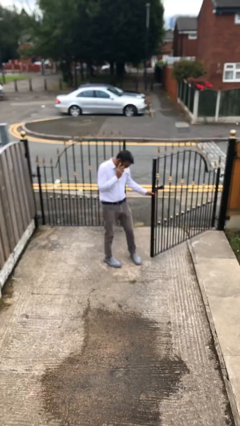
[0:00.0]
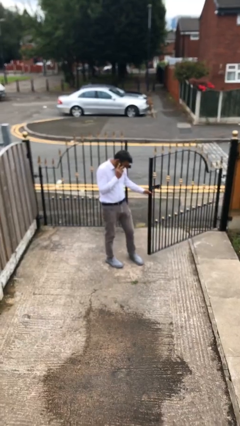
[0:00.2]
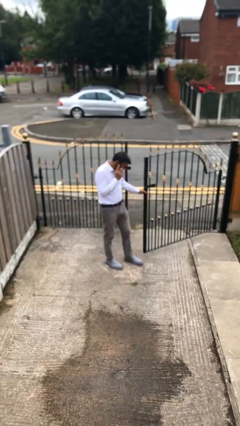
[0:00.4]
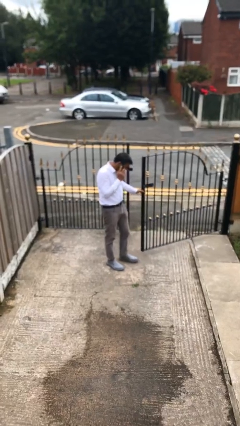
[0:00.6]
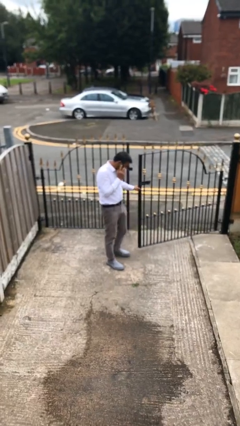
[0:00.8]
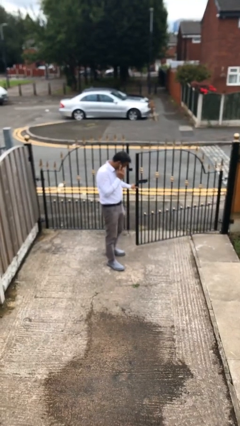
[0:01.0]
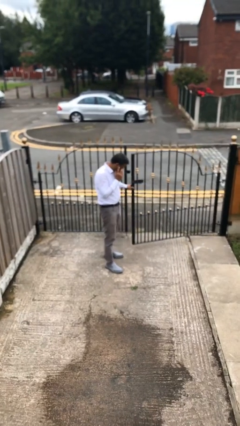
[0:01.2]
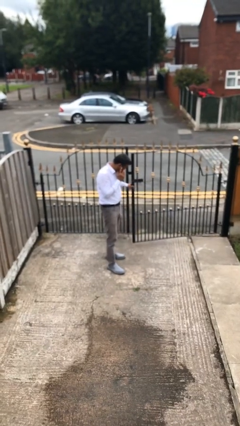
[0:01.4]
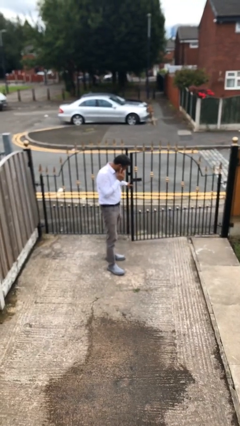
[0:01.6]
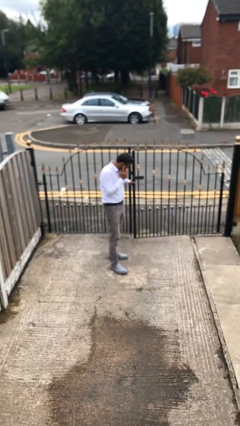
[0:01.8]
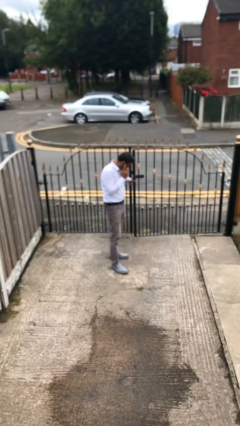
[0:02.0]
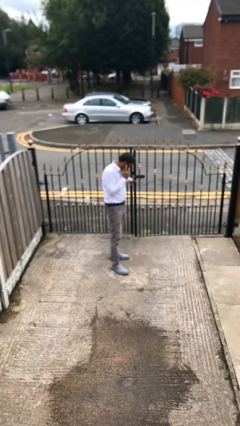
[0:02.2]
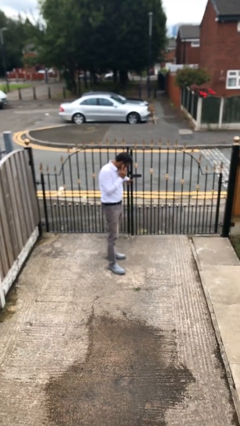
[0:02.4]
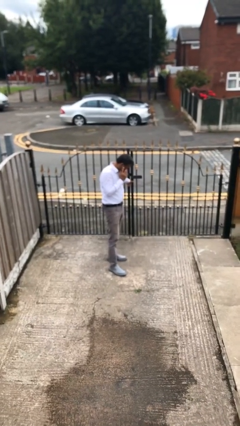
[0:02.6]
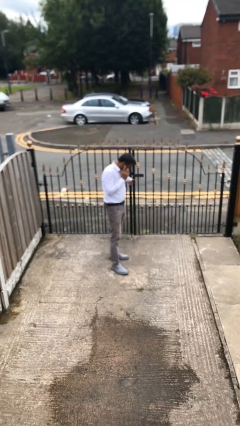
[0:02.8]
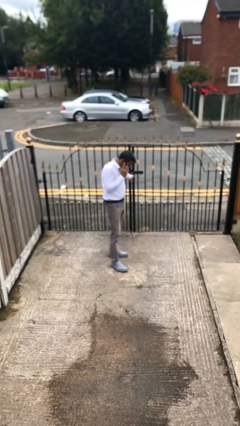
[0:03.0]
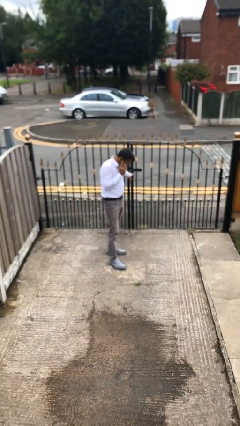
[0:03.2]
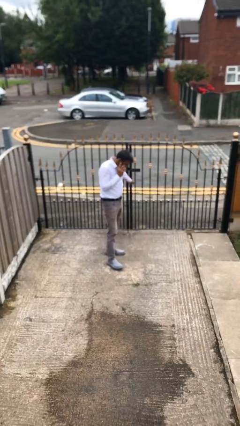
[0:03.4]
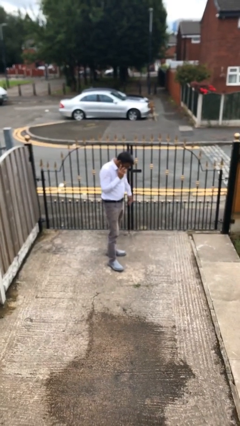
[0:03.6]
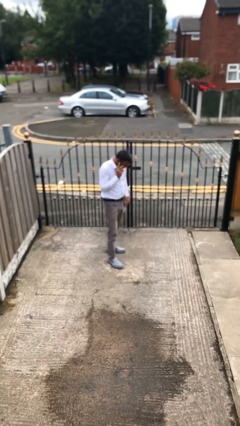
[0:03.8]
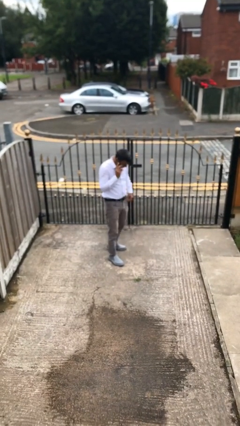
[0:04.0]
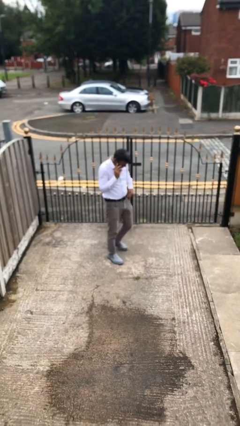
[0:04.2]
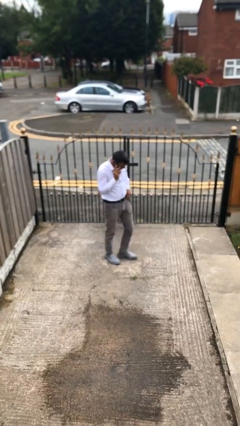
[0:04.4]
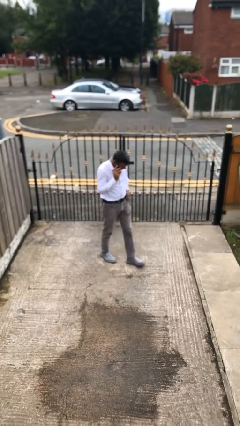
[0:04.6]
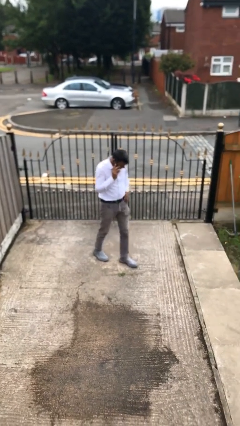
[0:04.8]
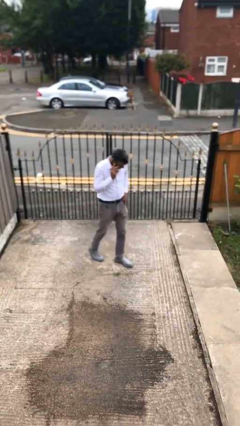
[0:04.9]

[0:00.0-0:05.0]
person closes facility door

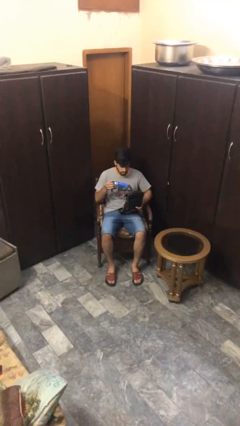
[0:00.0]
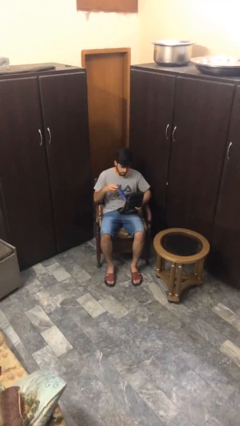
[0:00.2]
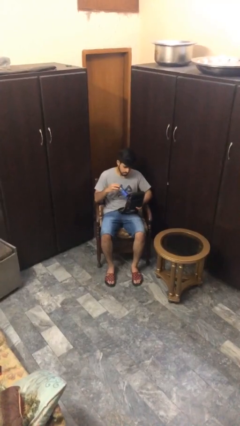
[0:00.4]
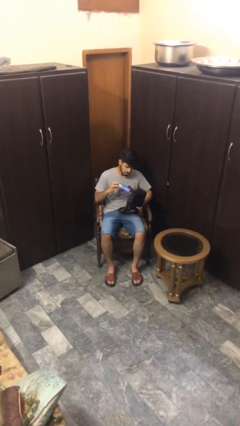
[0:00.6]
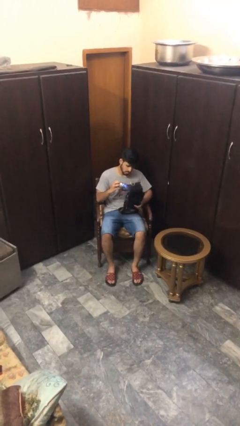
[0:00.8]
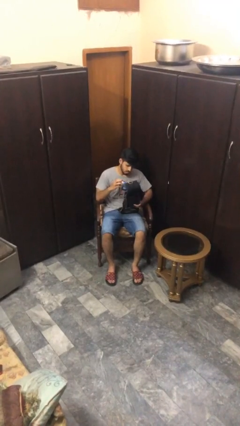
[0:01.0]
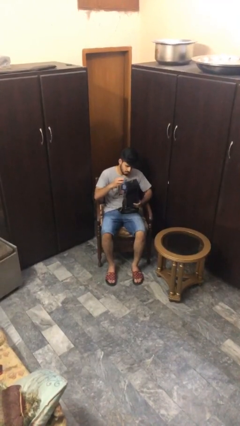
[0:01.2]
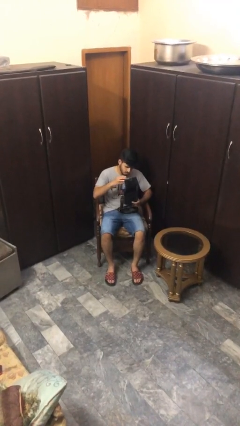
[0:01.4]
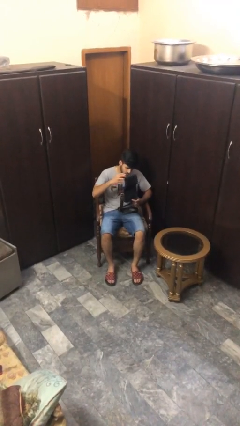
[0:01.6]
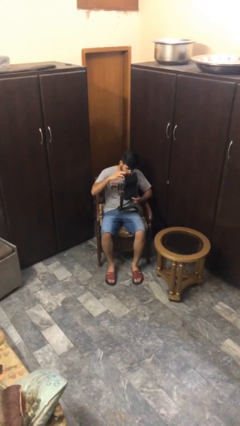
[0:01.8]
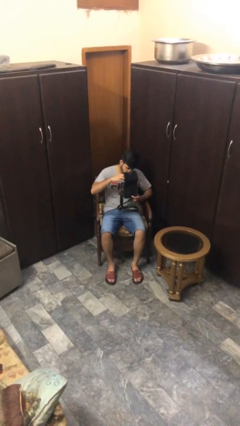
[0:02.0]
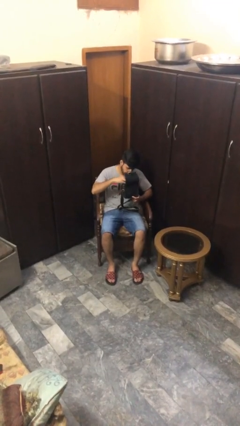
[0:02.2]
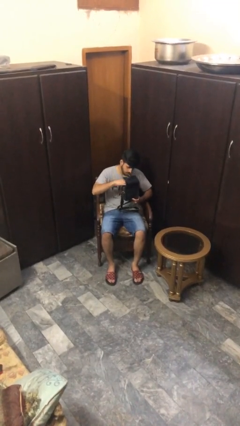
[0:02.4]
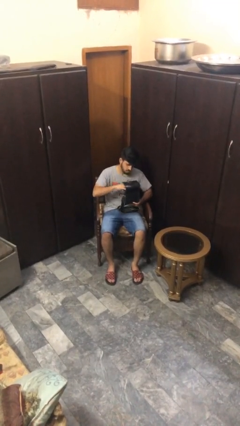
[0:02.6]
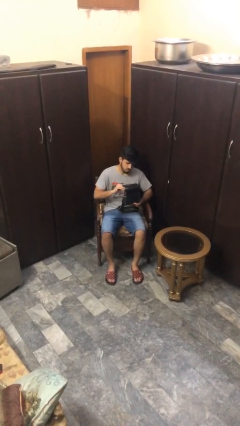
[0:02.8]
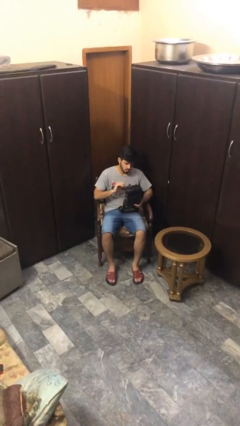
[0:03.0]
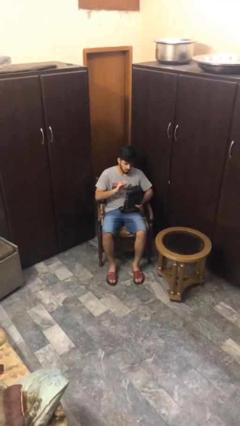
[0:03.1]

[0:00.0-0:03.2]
person puts object into purse

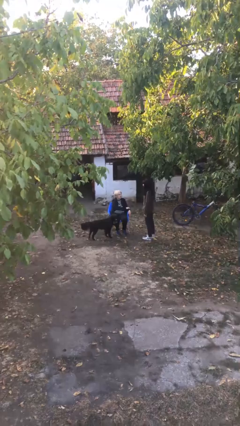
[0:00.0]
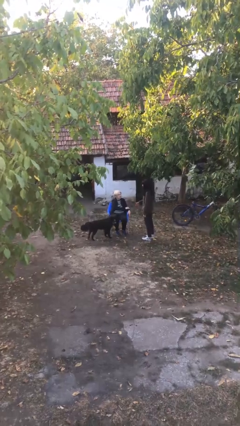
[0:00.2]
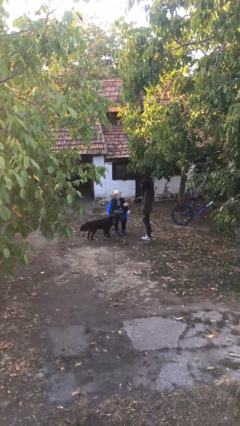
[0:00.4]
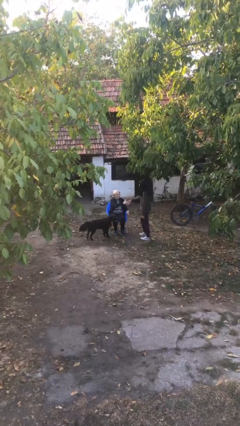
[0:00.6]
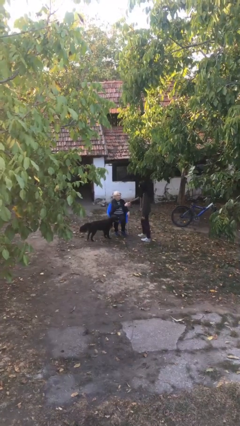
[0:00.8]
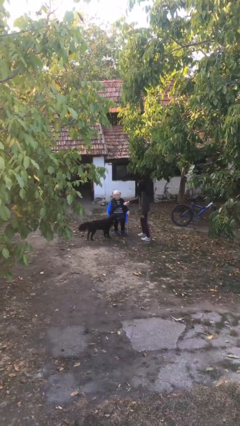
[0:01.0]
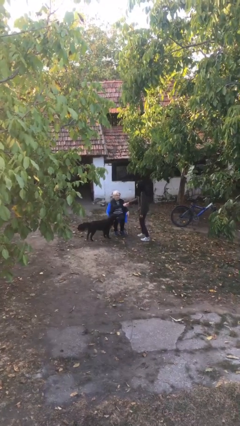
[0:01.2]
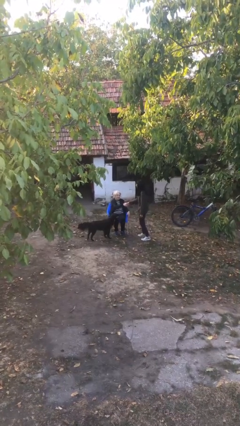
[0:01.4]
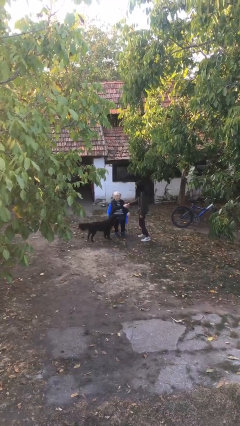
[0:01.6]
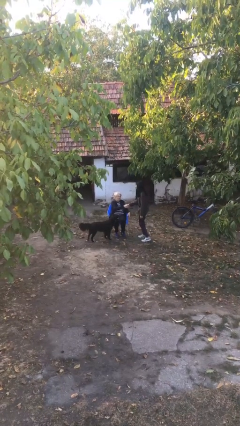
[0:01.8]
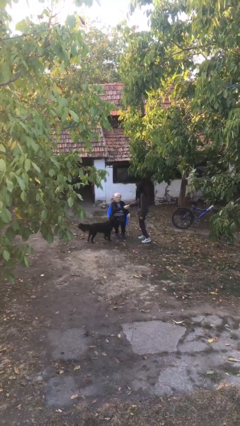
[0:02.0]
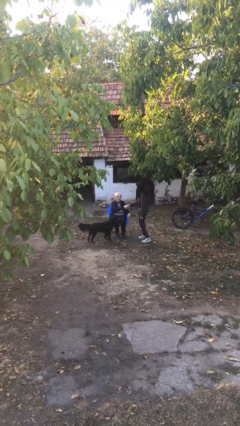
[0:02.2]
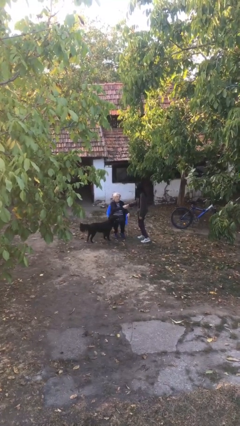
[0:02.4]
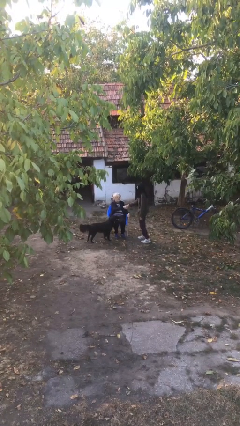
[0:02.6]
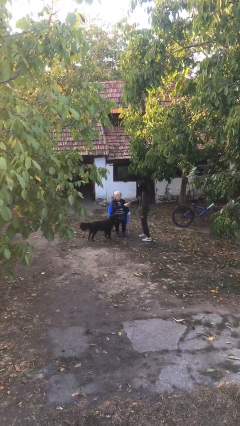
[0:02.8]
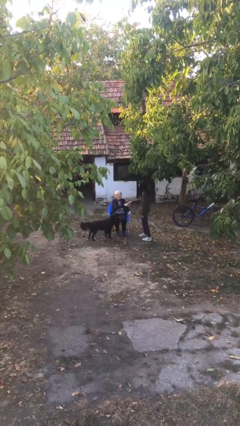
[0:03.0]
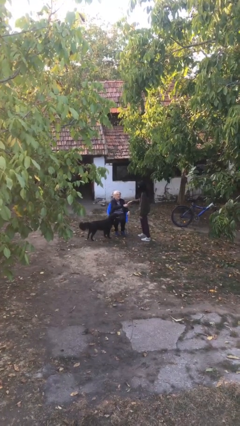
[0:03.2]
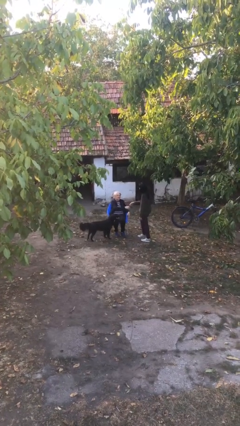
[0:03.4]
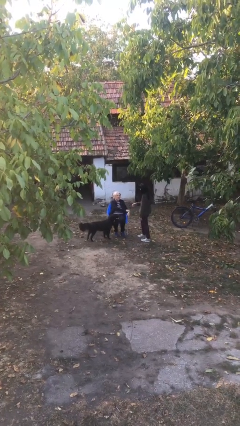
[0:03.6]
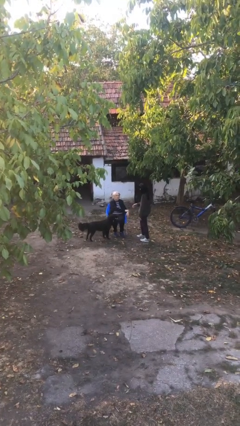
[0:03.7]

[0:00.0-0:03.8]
person shakes hand

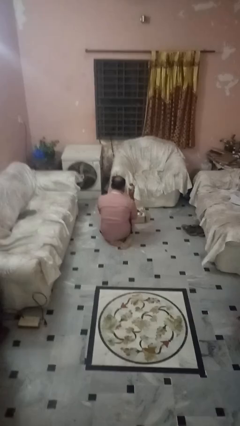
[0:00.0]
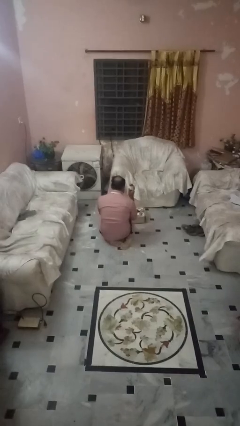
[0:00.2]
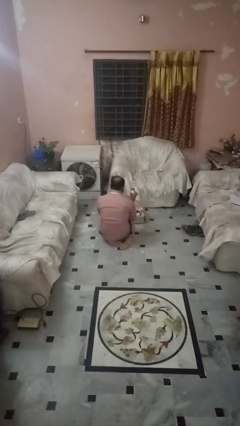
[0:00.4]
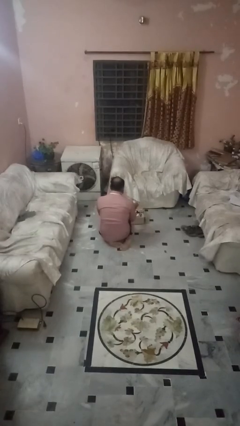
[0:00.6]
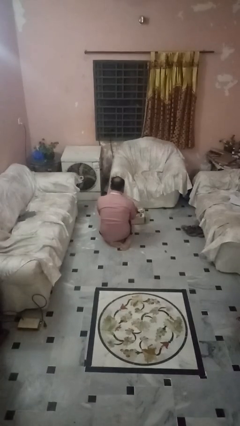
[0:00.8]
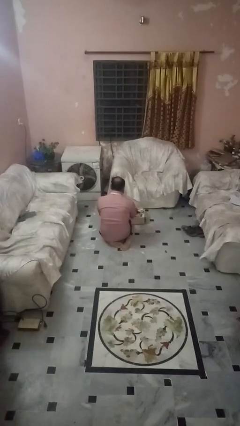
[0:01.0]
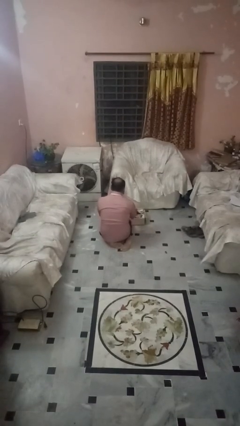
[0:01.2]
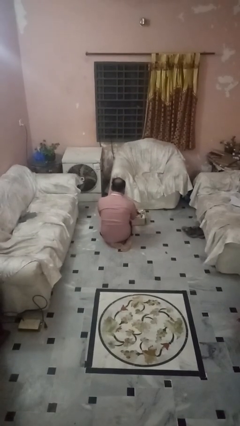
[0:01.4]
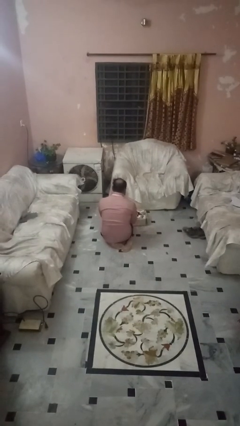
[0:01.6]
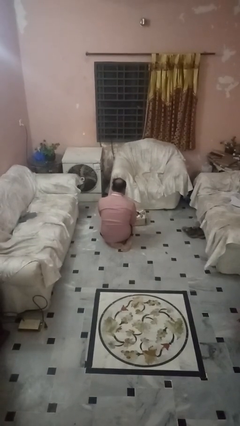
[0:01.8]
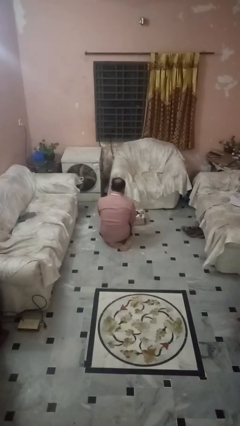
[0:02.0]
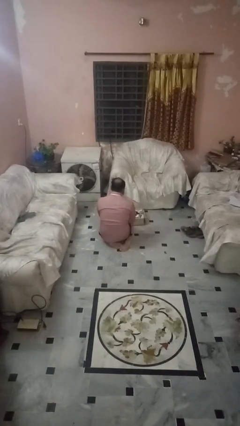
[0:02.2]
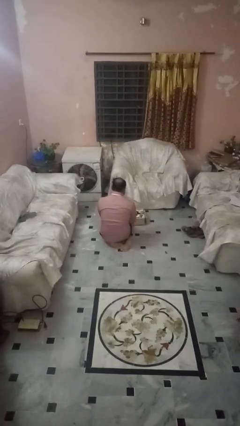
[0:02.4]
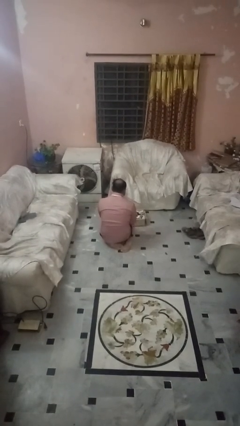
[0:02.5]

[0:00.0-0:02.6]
person puts object into box

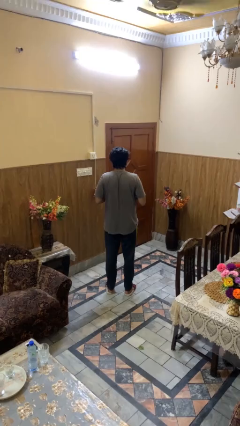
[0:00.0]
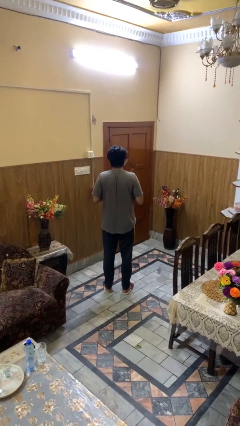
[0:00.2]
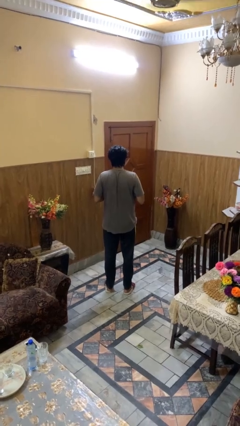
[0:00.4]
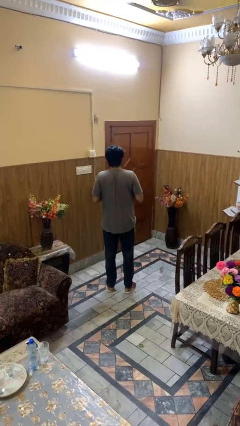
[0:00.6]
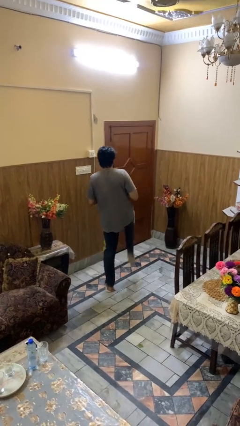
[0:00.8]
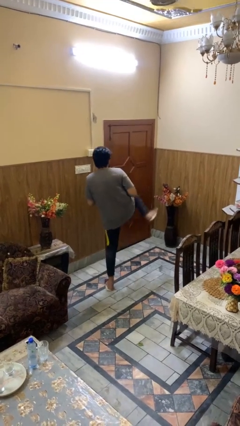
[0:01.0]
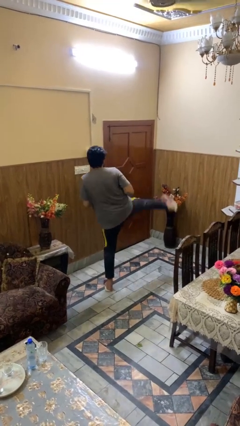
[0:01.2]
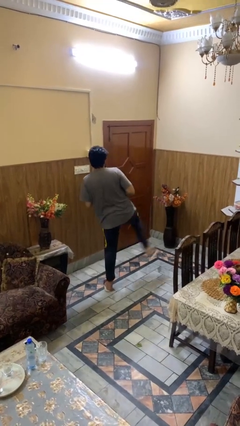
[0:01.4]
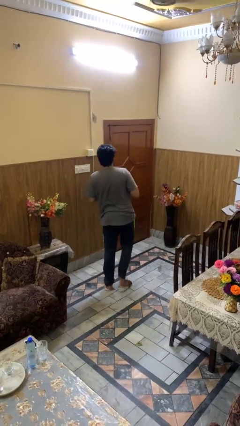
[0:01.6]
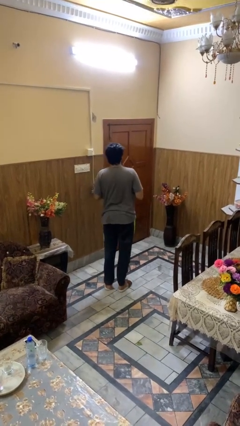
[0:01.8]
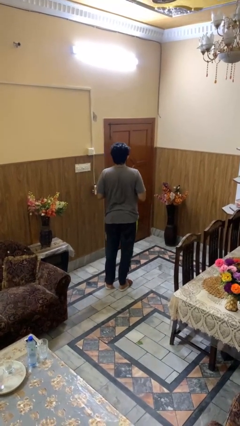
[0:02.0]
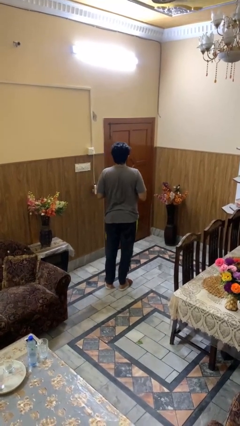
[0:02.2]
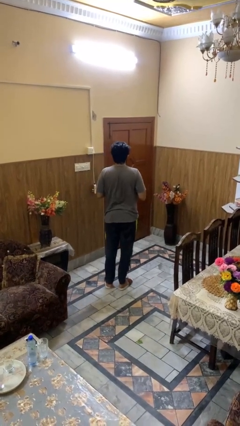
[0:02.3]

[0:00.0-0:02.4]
person karate kicks

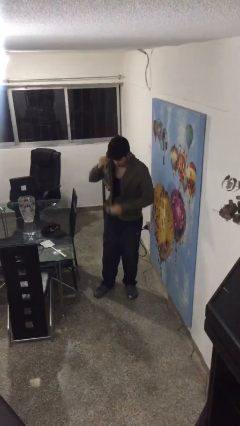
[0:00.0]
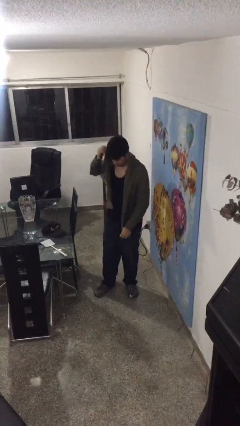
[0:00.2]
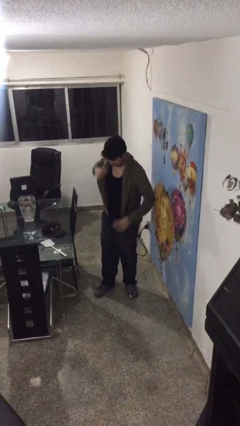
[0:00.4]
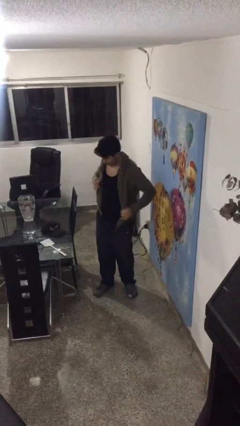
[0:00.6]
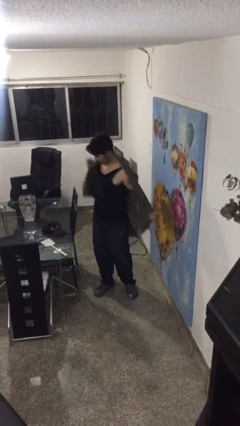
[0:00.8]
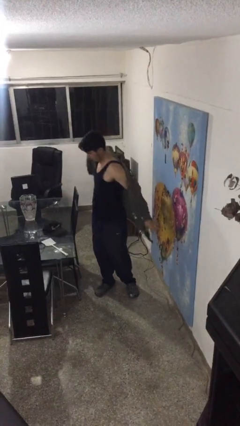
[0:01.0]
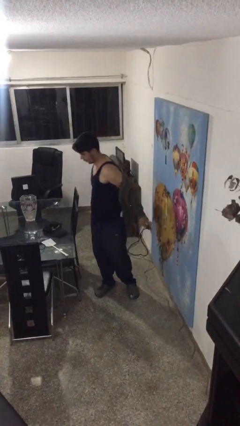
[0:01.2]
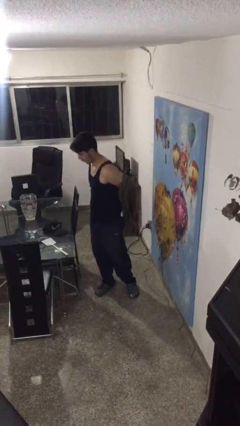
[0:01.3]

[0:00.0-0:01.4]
person unzips jacket
